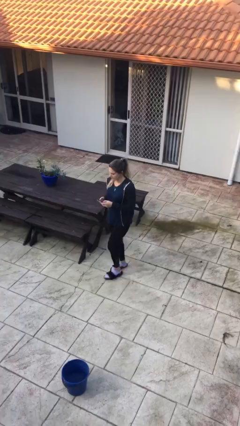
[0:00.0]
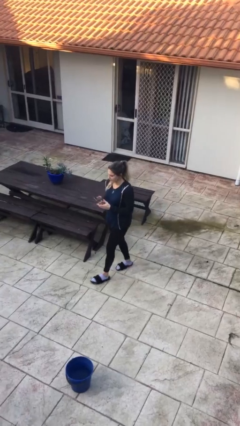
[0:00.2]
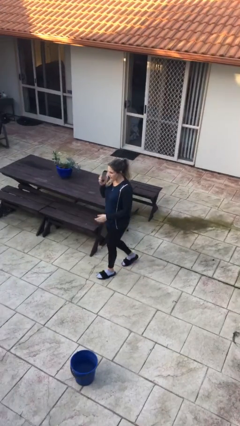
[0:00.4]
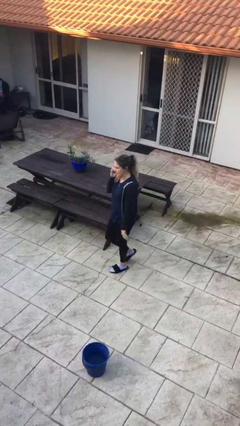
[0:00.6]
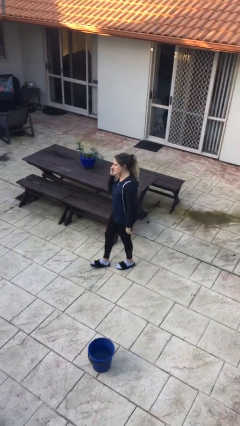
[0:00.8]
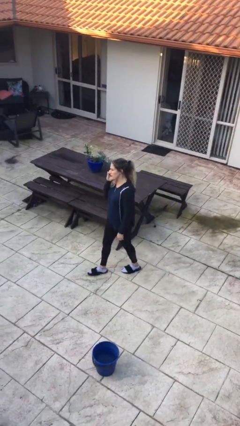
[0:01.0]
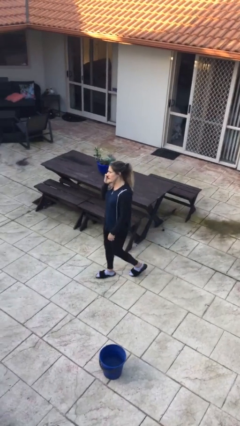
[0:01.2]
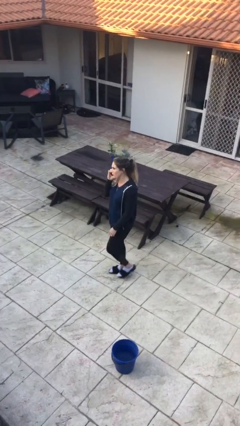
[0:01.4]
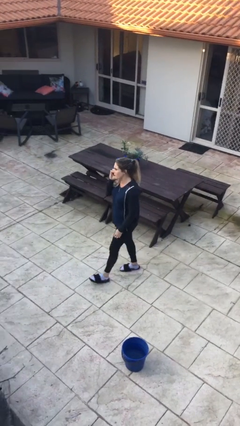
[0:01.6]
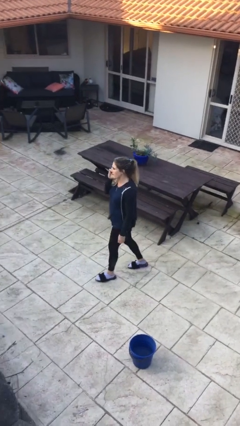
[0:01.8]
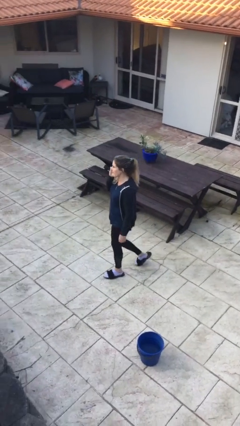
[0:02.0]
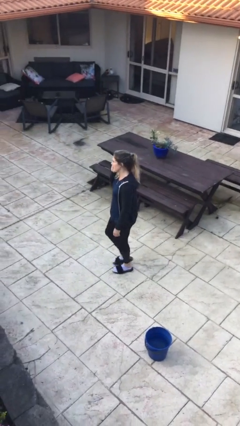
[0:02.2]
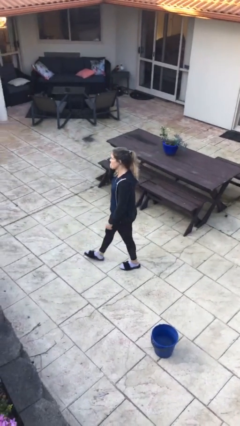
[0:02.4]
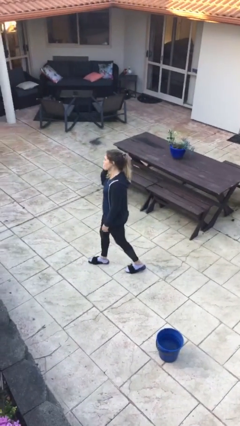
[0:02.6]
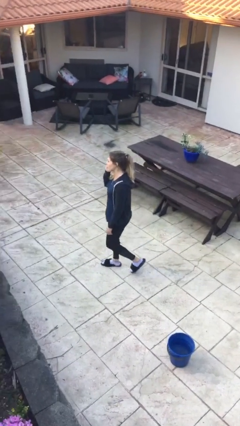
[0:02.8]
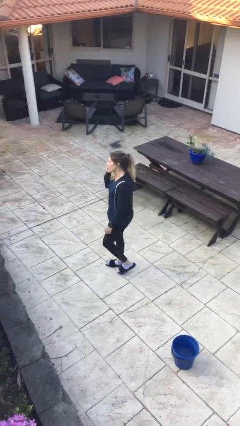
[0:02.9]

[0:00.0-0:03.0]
person talks on phone

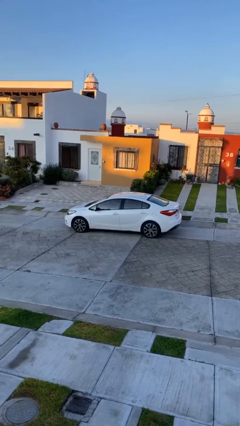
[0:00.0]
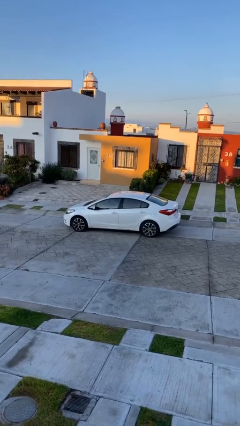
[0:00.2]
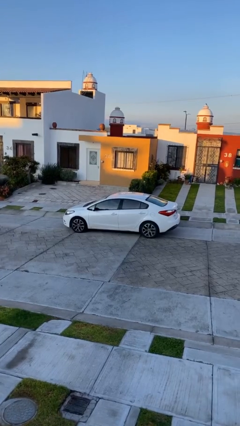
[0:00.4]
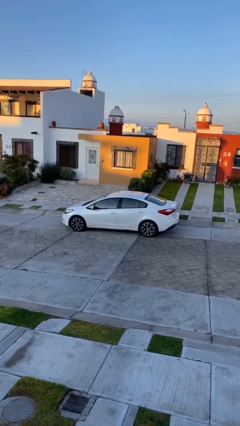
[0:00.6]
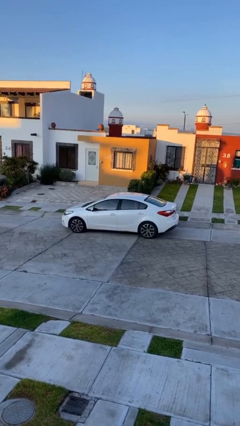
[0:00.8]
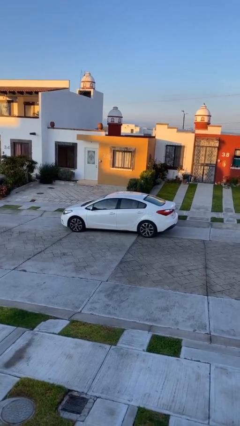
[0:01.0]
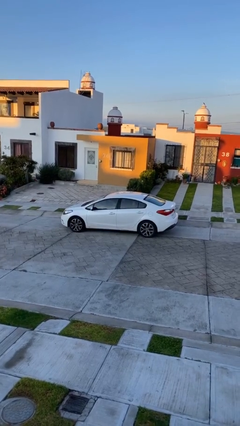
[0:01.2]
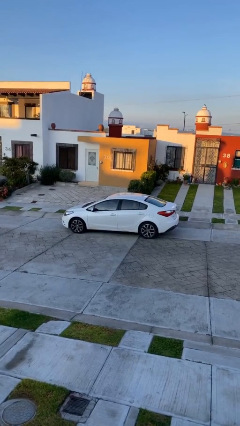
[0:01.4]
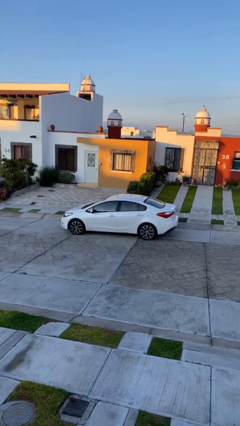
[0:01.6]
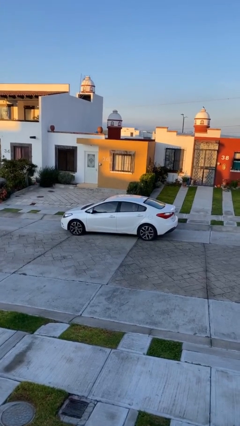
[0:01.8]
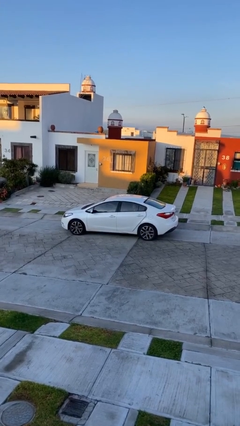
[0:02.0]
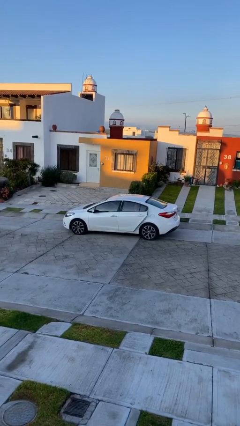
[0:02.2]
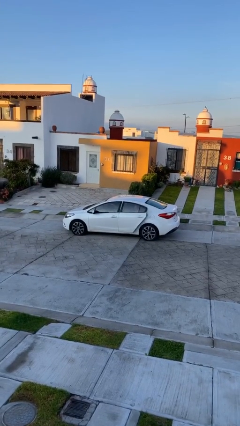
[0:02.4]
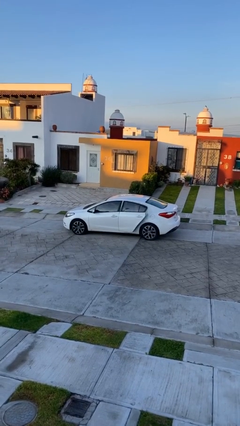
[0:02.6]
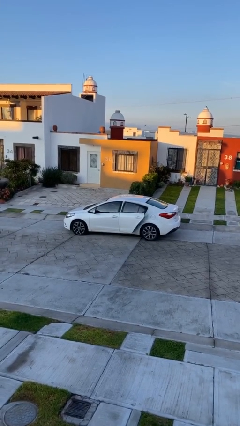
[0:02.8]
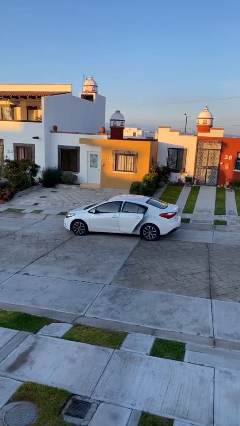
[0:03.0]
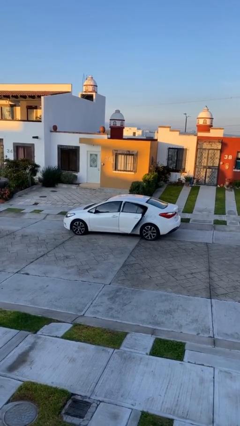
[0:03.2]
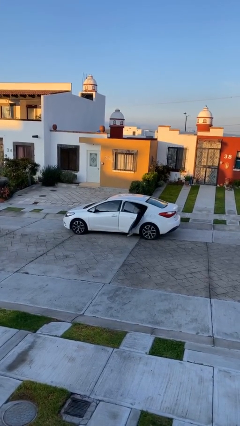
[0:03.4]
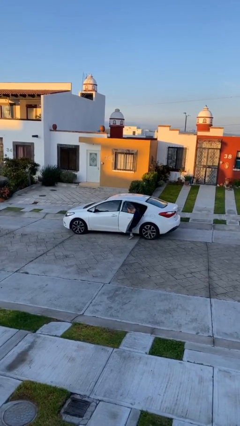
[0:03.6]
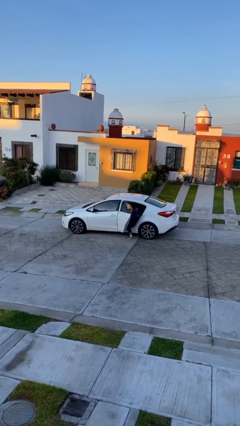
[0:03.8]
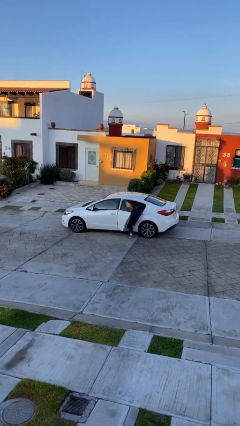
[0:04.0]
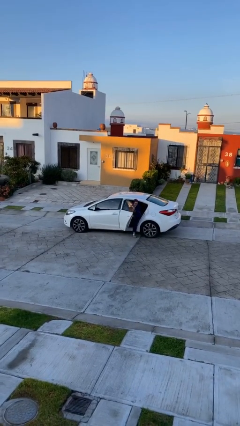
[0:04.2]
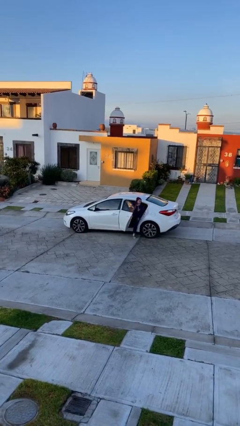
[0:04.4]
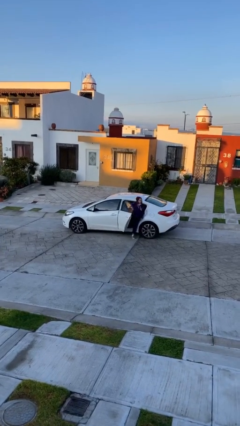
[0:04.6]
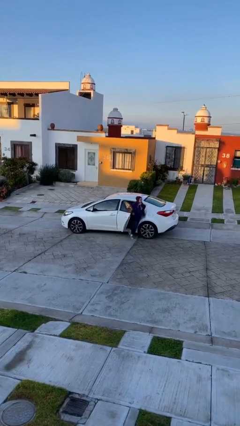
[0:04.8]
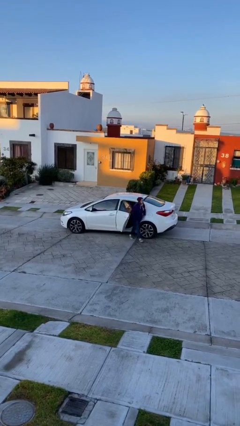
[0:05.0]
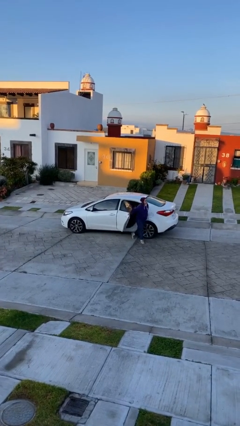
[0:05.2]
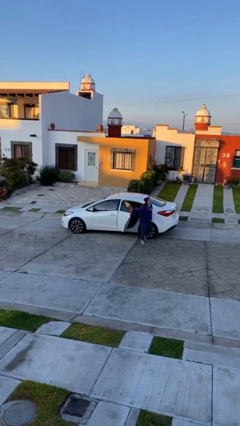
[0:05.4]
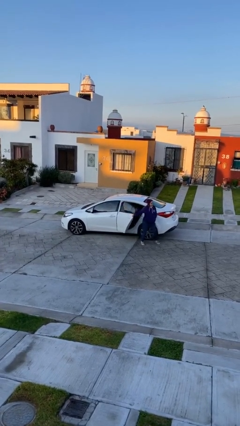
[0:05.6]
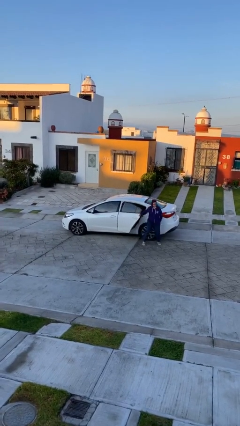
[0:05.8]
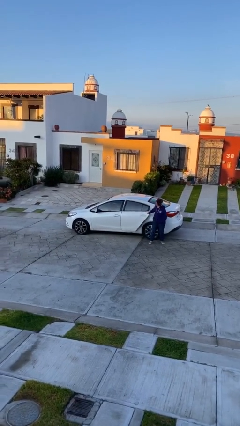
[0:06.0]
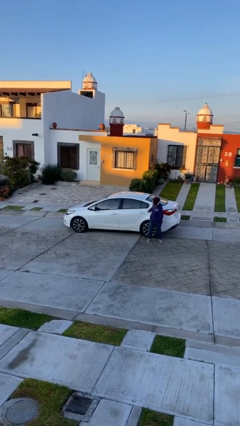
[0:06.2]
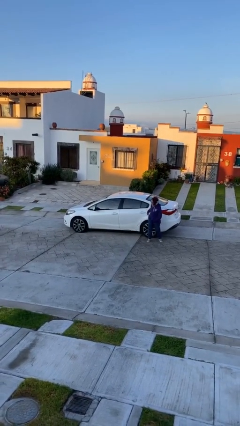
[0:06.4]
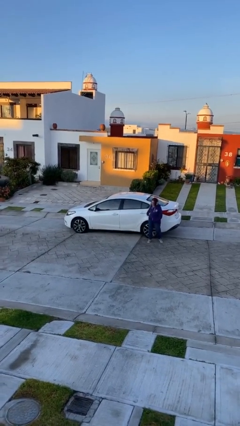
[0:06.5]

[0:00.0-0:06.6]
car drops off person

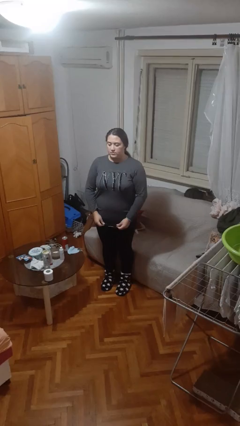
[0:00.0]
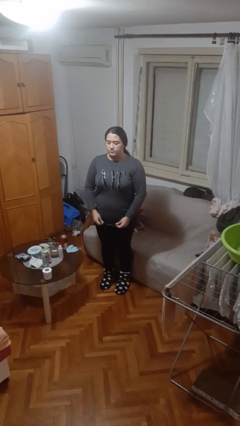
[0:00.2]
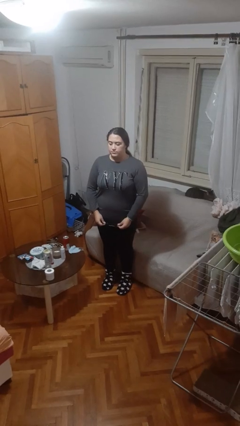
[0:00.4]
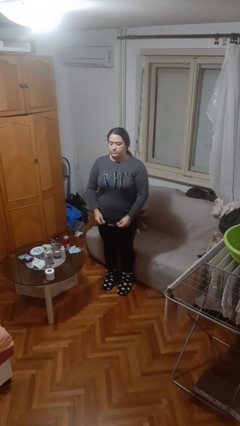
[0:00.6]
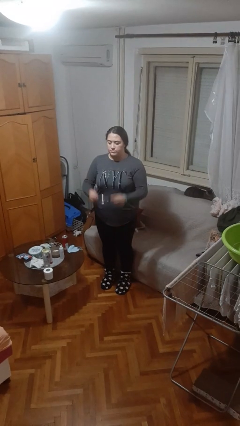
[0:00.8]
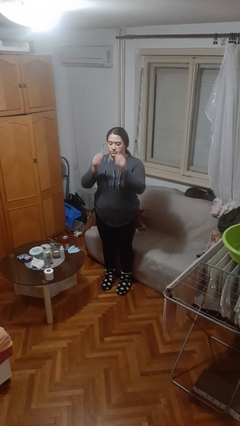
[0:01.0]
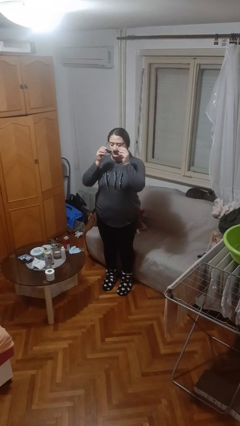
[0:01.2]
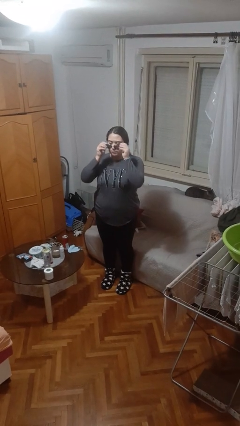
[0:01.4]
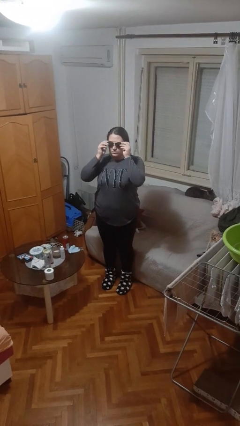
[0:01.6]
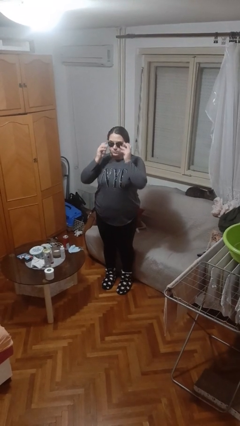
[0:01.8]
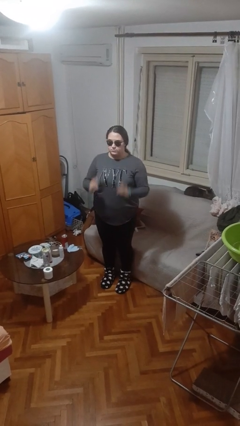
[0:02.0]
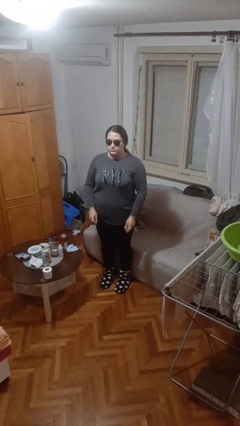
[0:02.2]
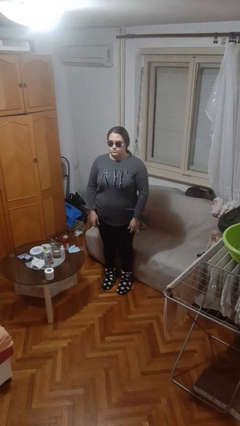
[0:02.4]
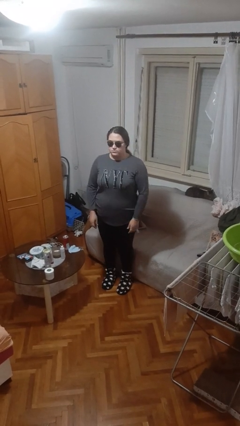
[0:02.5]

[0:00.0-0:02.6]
person puts on sunglasses

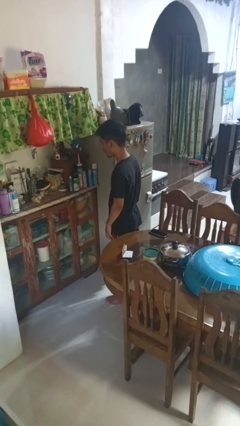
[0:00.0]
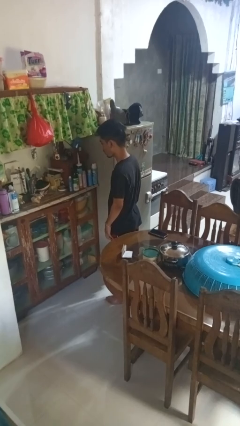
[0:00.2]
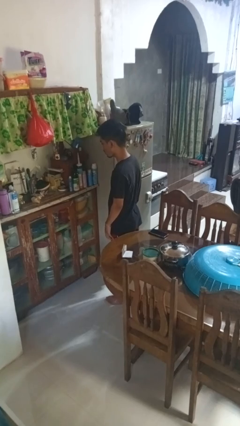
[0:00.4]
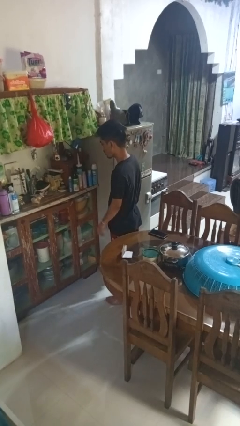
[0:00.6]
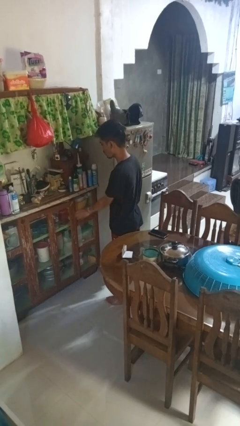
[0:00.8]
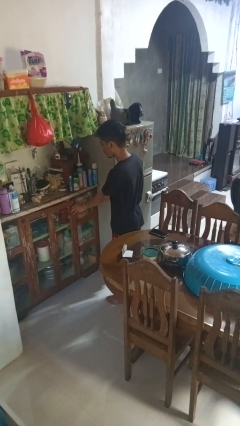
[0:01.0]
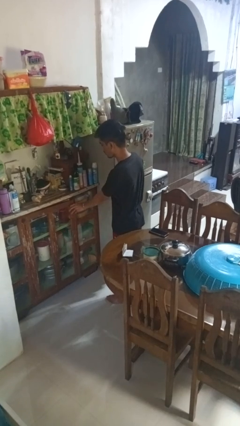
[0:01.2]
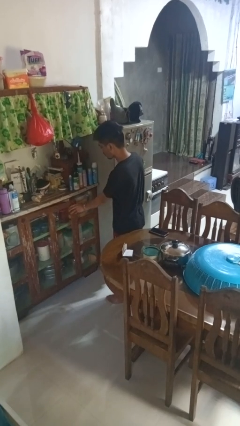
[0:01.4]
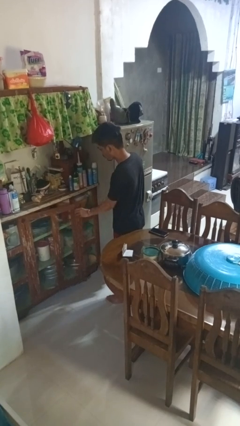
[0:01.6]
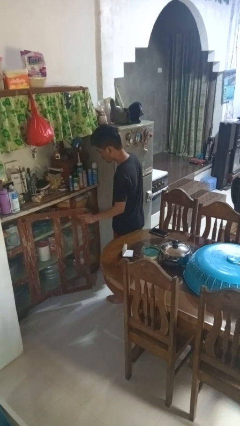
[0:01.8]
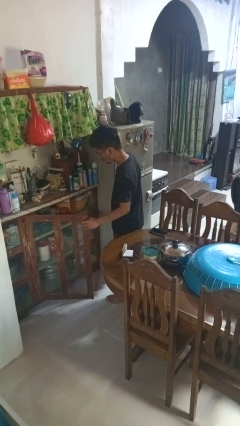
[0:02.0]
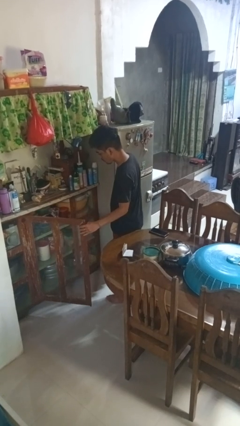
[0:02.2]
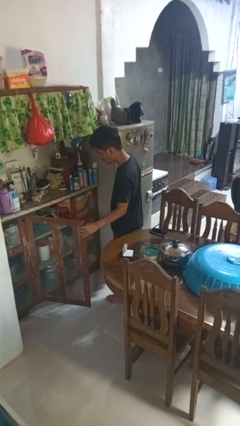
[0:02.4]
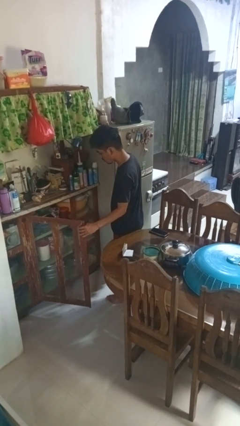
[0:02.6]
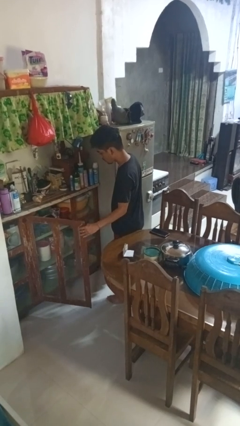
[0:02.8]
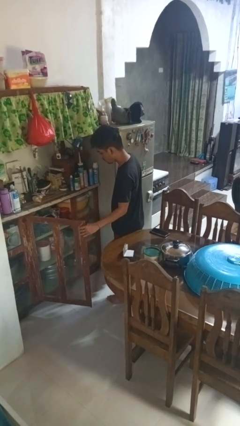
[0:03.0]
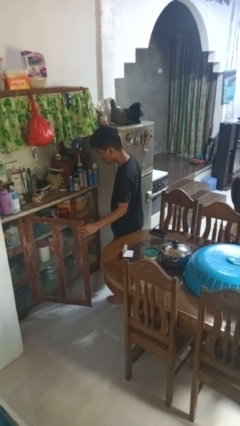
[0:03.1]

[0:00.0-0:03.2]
person opens cabinet

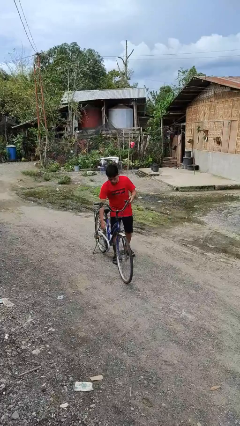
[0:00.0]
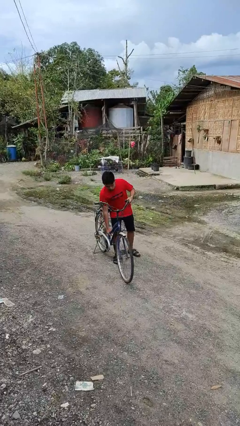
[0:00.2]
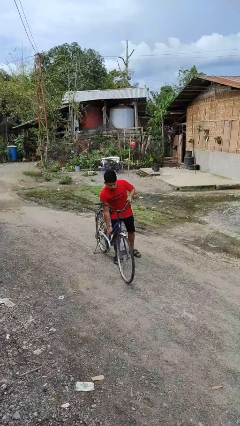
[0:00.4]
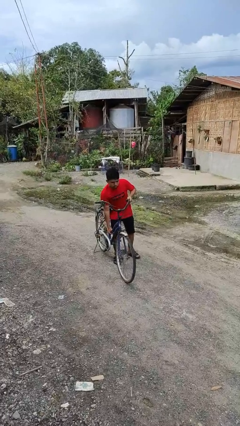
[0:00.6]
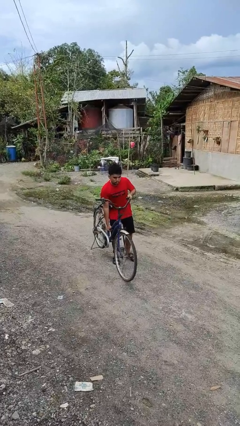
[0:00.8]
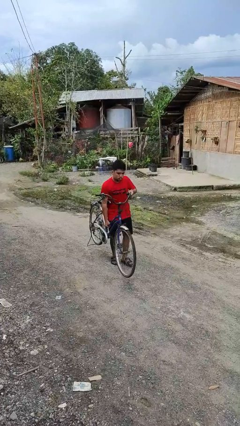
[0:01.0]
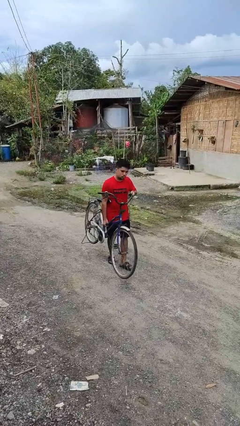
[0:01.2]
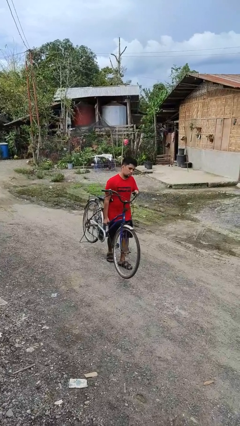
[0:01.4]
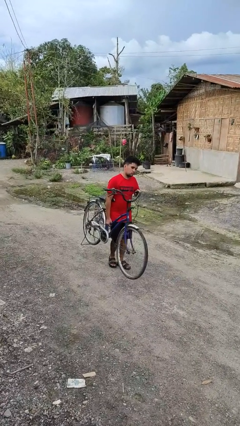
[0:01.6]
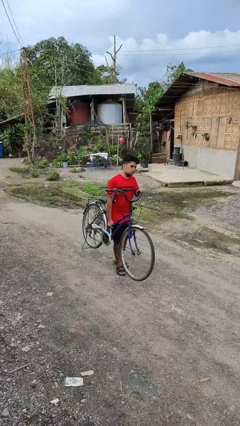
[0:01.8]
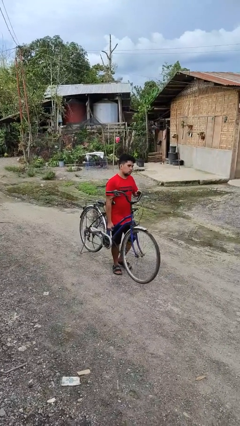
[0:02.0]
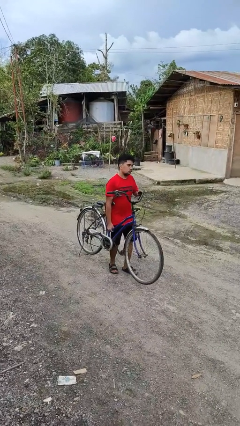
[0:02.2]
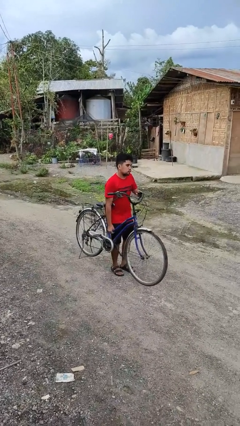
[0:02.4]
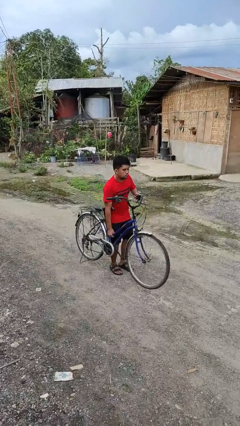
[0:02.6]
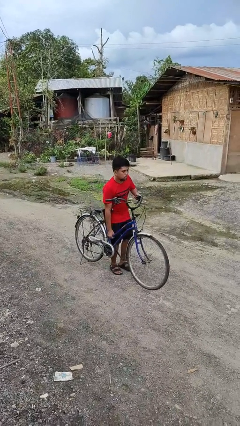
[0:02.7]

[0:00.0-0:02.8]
person carries bicycle
